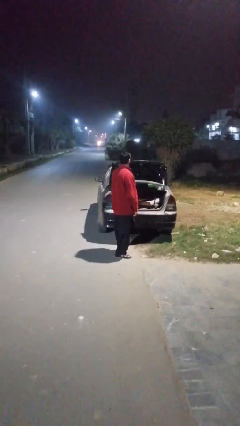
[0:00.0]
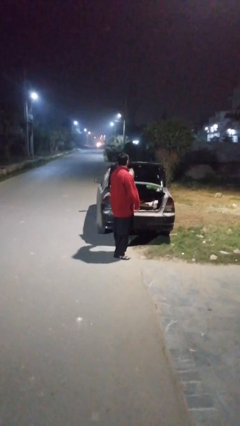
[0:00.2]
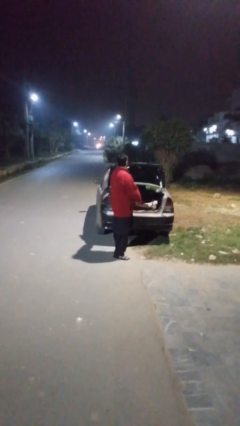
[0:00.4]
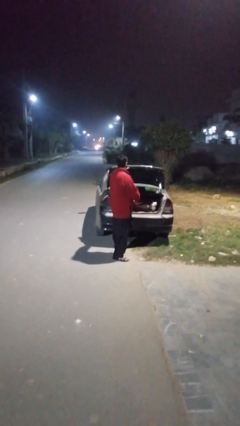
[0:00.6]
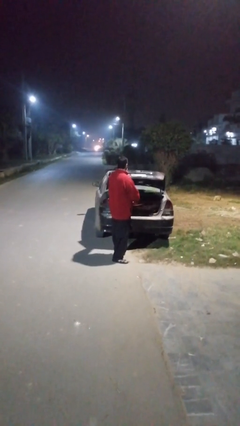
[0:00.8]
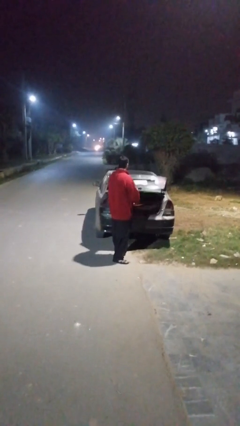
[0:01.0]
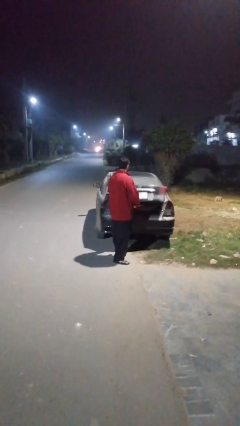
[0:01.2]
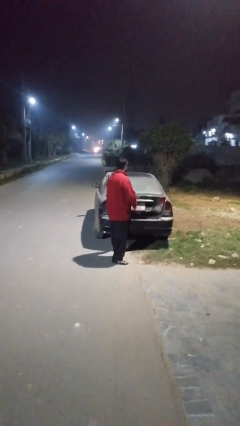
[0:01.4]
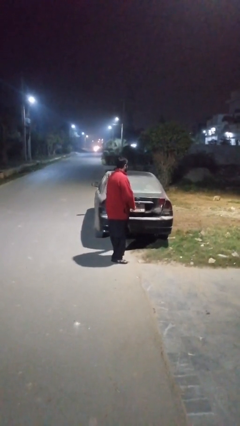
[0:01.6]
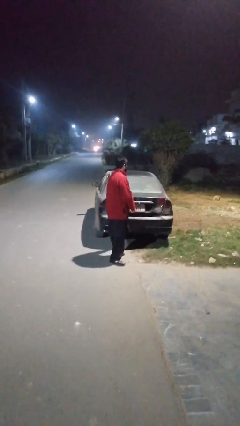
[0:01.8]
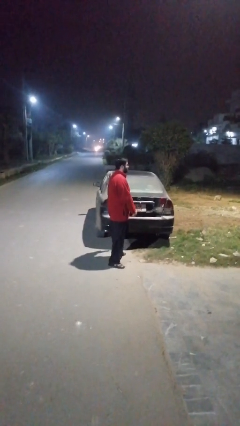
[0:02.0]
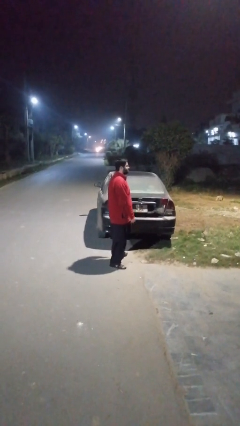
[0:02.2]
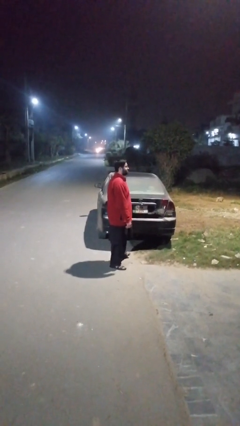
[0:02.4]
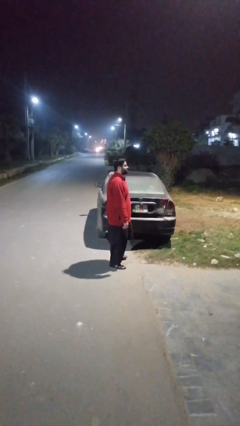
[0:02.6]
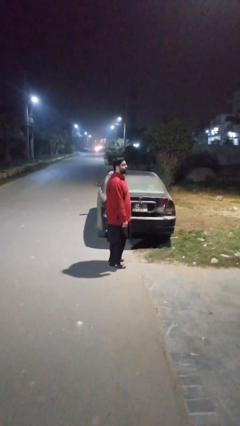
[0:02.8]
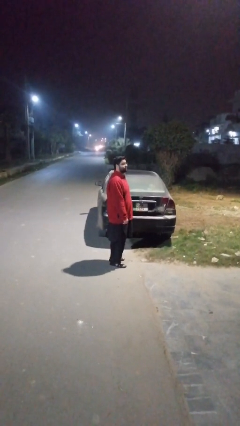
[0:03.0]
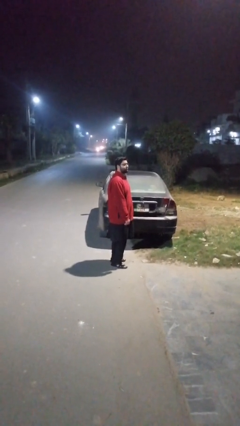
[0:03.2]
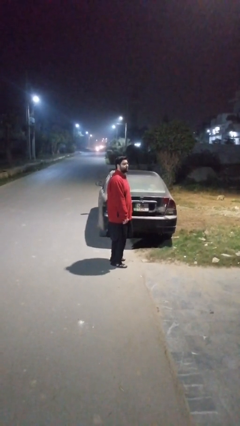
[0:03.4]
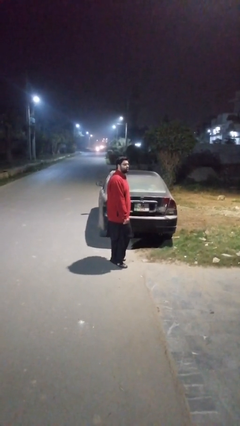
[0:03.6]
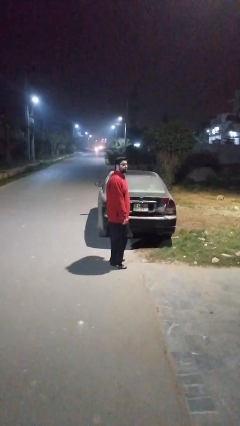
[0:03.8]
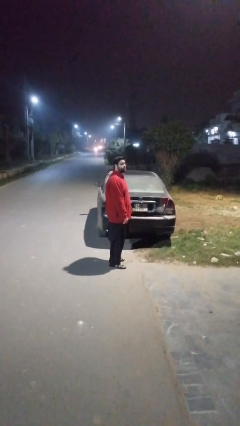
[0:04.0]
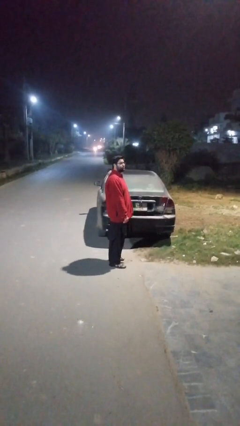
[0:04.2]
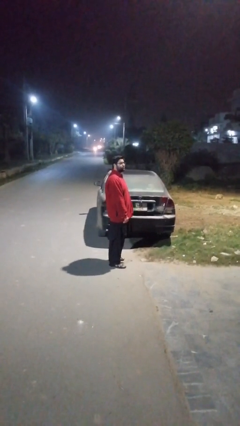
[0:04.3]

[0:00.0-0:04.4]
person closes car trunk

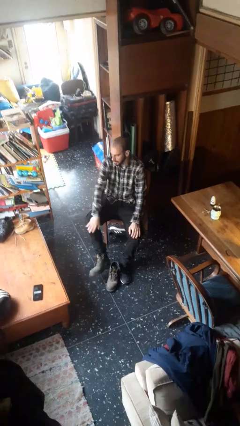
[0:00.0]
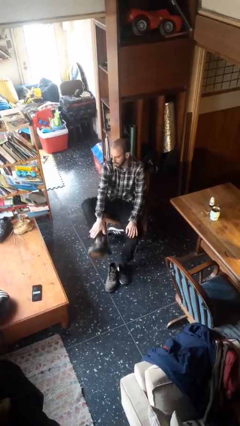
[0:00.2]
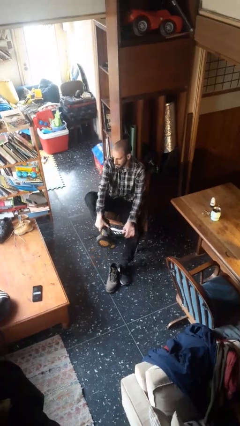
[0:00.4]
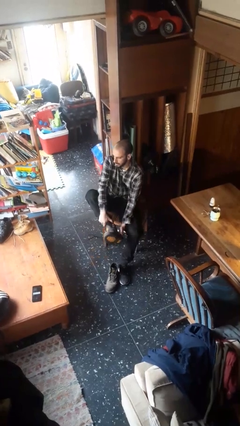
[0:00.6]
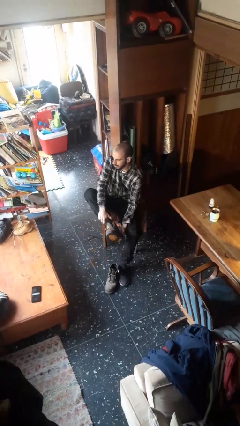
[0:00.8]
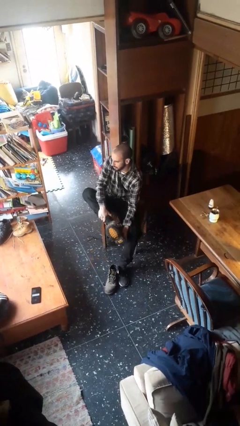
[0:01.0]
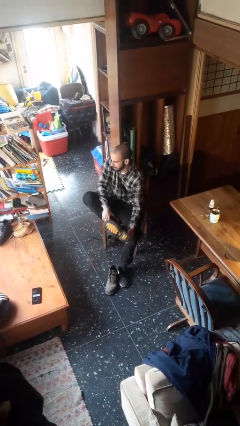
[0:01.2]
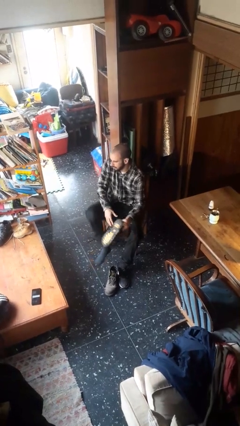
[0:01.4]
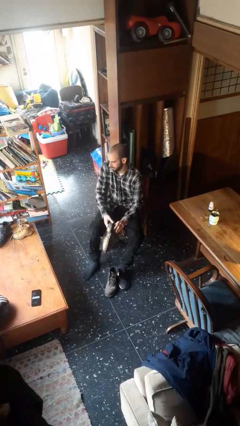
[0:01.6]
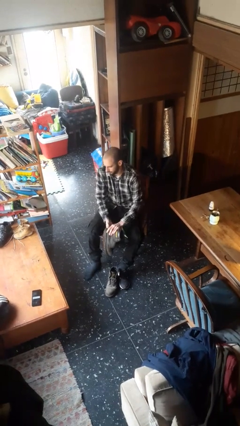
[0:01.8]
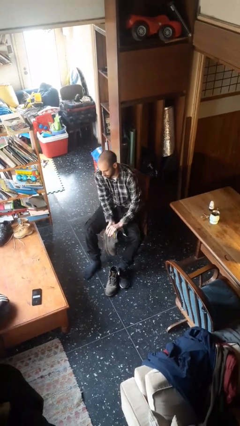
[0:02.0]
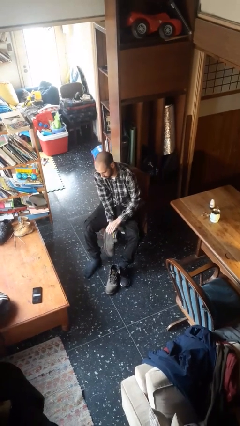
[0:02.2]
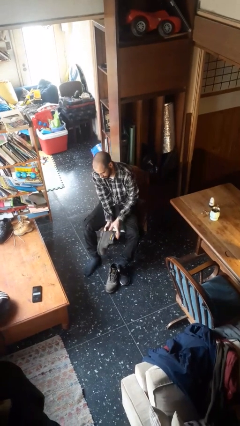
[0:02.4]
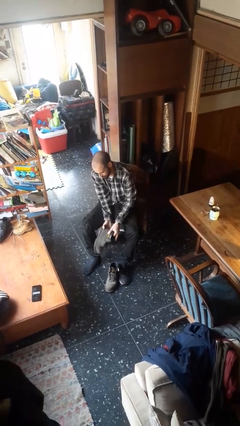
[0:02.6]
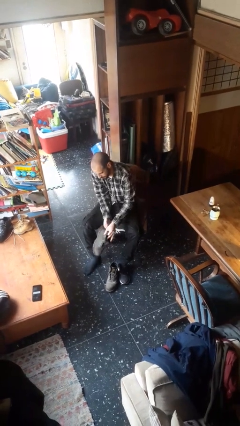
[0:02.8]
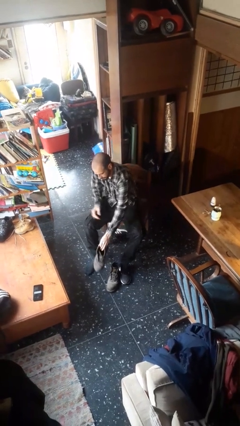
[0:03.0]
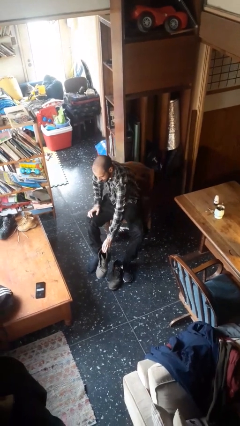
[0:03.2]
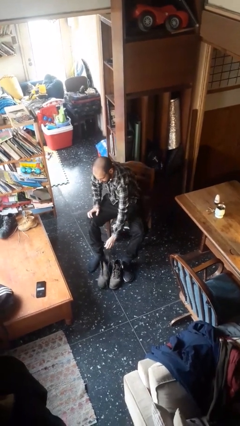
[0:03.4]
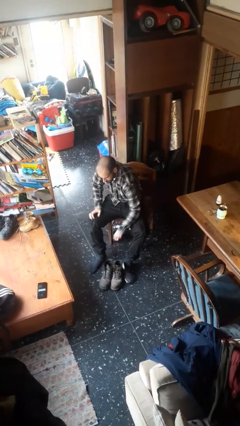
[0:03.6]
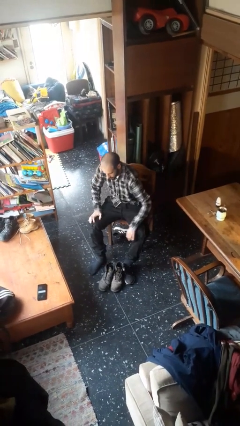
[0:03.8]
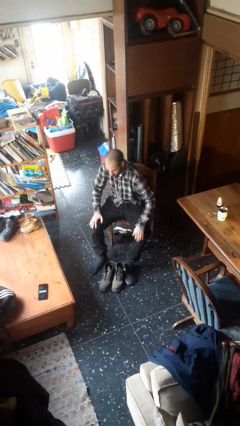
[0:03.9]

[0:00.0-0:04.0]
person takes off boots

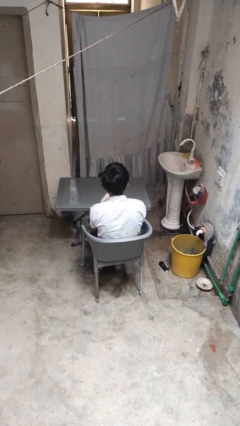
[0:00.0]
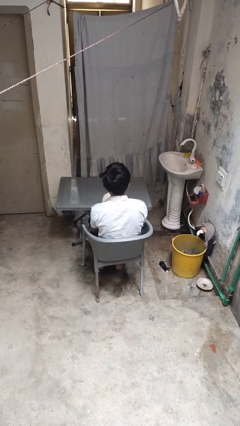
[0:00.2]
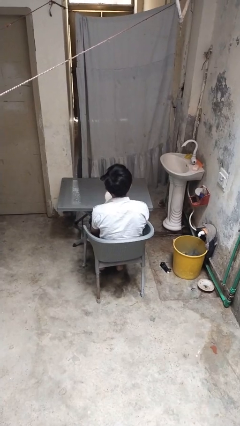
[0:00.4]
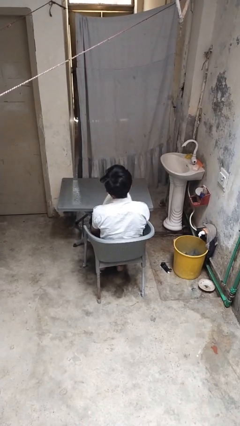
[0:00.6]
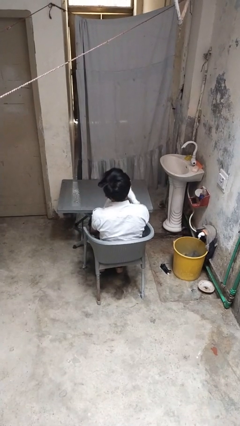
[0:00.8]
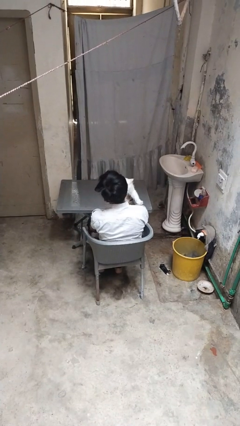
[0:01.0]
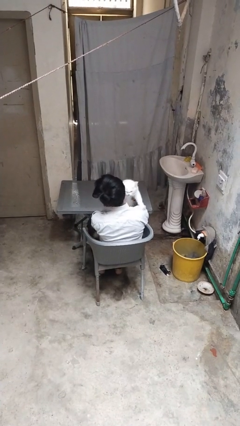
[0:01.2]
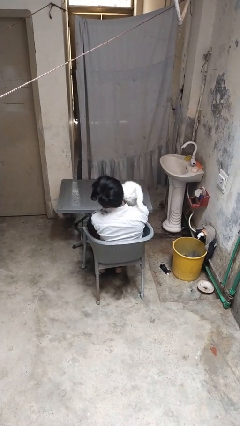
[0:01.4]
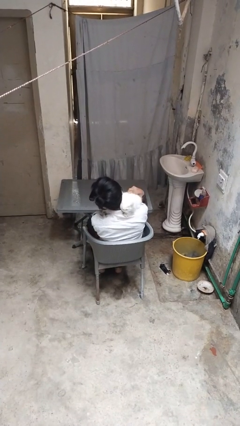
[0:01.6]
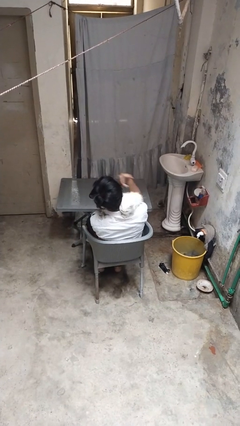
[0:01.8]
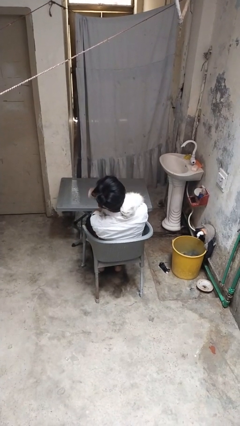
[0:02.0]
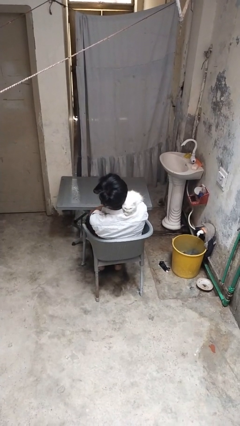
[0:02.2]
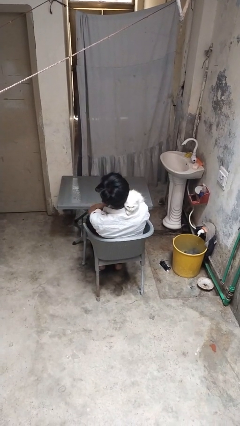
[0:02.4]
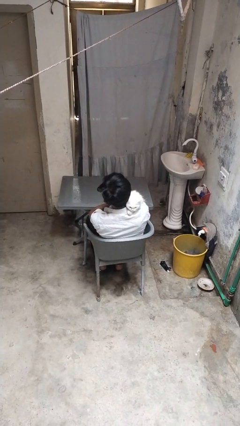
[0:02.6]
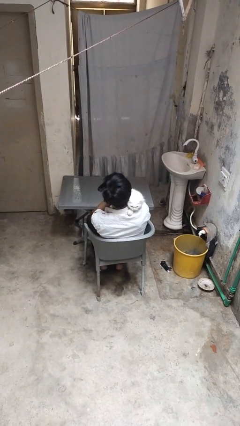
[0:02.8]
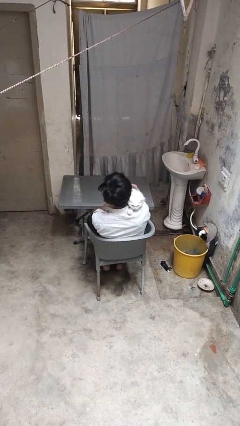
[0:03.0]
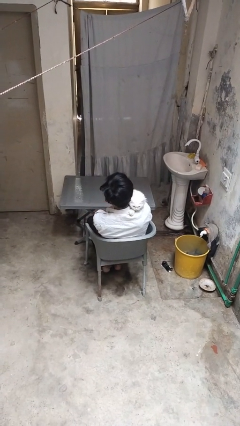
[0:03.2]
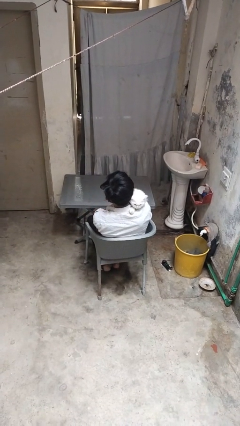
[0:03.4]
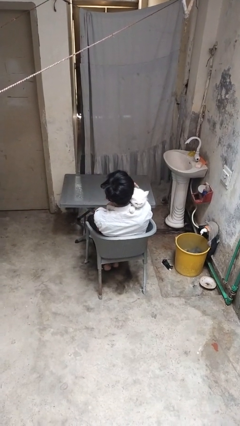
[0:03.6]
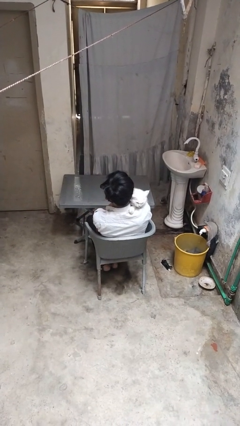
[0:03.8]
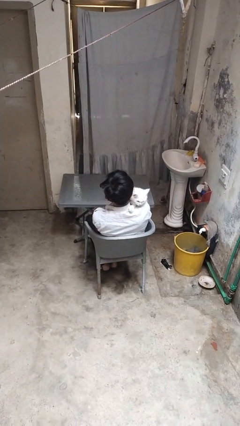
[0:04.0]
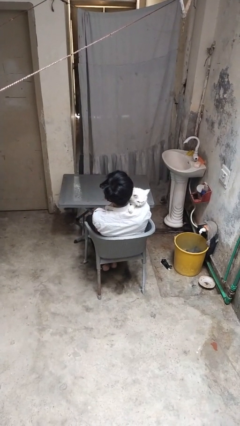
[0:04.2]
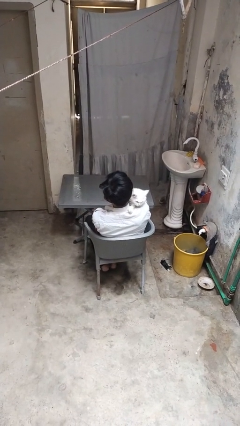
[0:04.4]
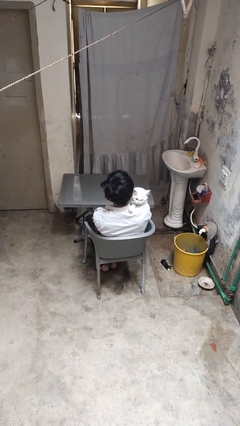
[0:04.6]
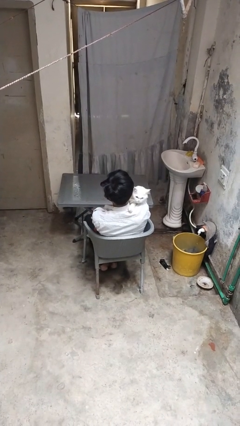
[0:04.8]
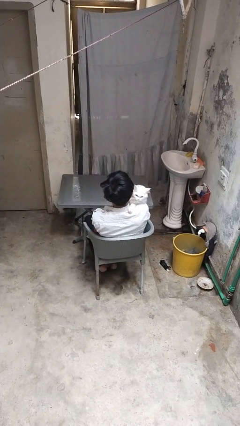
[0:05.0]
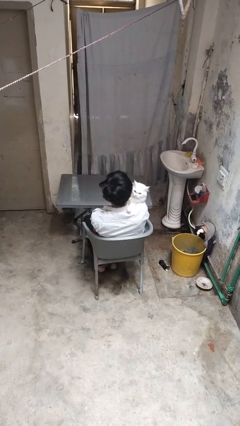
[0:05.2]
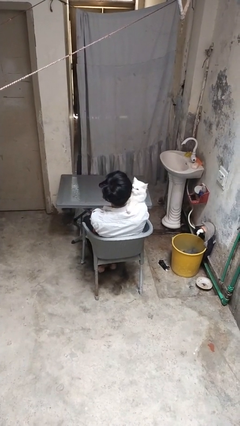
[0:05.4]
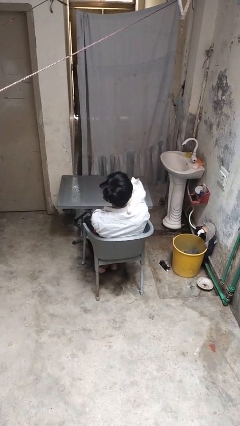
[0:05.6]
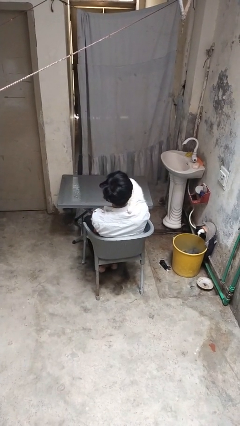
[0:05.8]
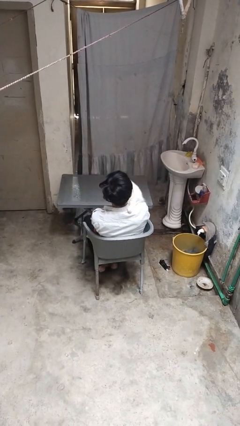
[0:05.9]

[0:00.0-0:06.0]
person hugs cat

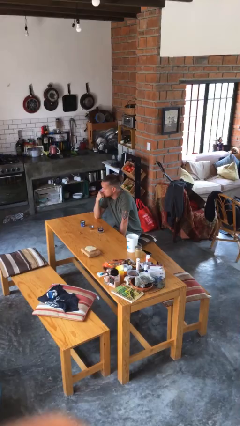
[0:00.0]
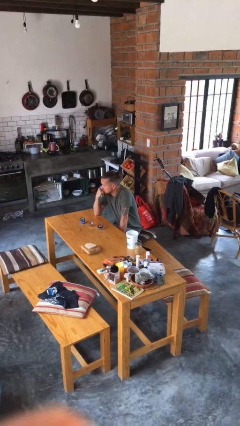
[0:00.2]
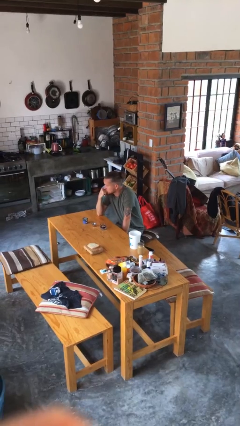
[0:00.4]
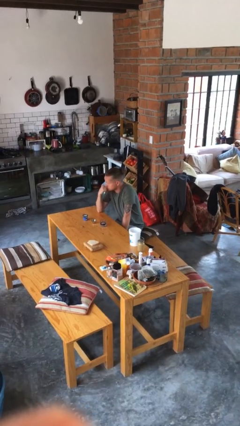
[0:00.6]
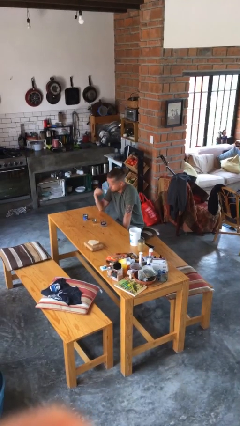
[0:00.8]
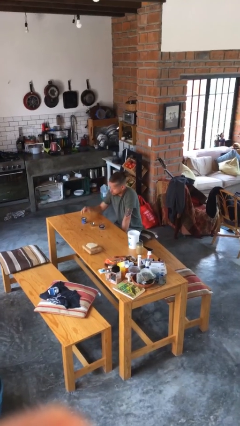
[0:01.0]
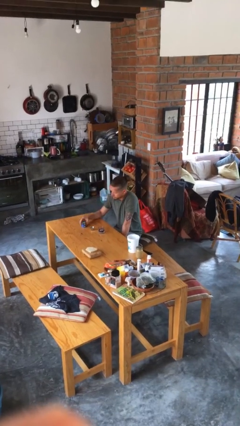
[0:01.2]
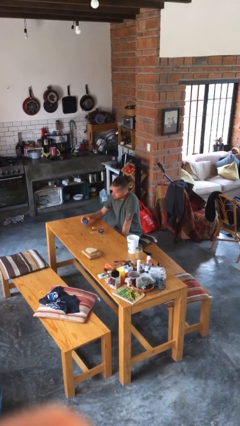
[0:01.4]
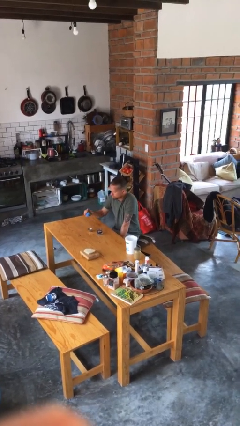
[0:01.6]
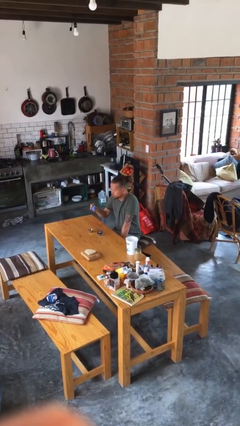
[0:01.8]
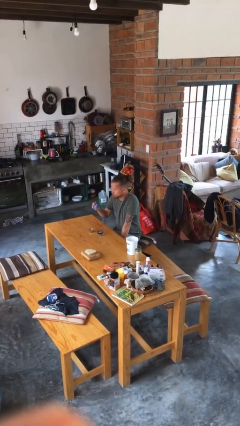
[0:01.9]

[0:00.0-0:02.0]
person picks up object from table

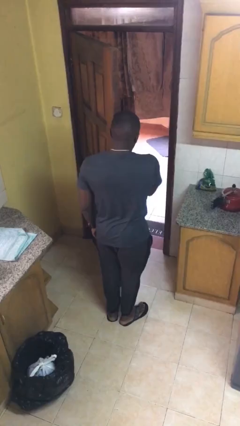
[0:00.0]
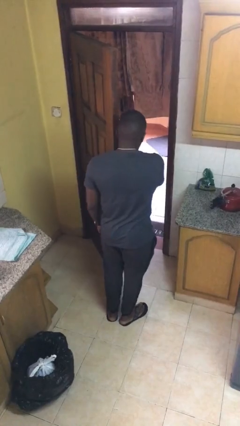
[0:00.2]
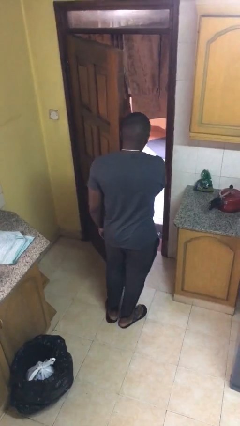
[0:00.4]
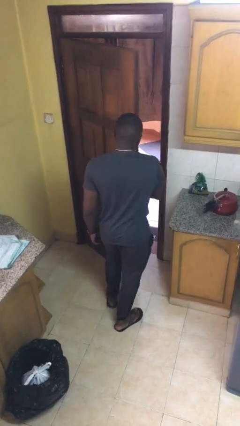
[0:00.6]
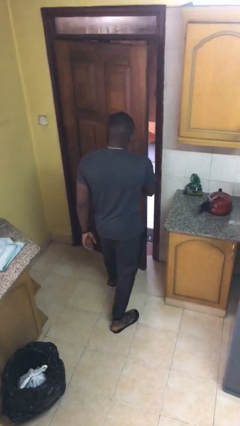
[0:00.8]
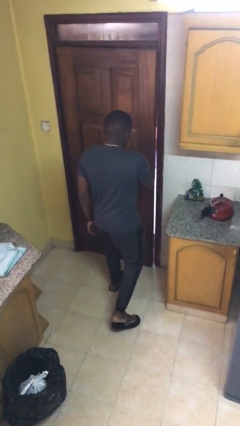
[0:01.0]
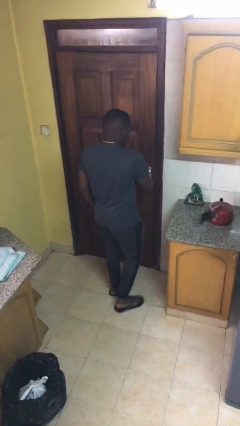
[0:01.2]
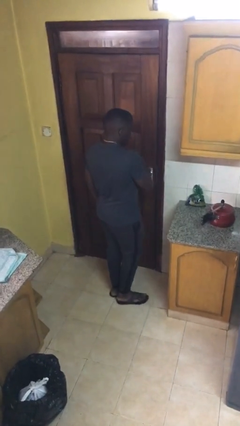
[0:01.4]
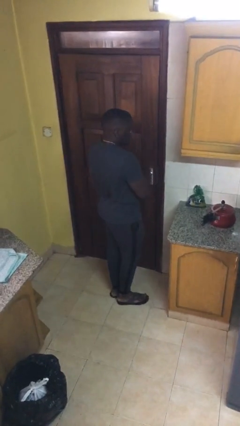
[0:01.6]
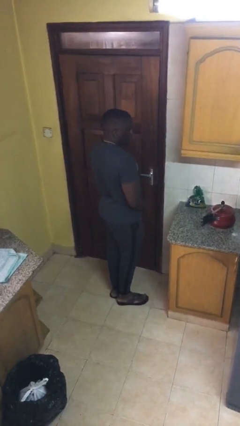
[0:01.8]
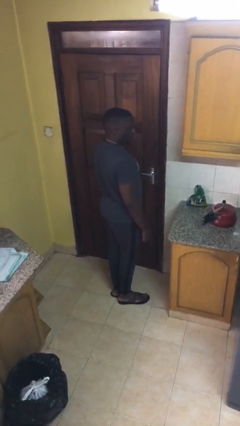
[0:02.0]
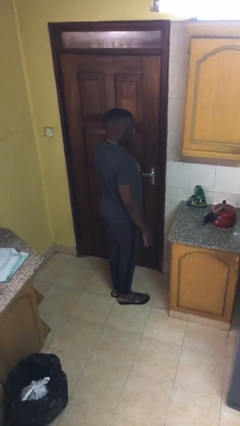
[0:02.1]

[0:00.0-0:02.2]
person closes facility door
